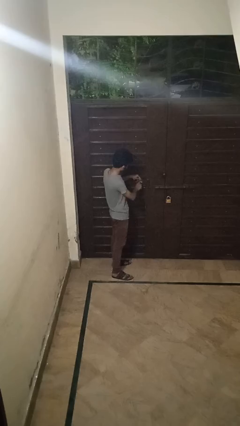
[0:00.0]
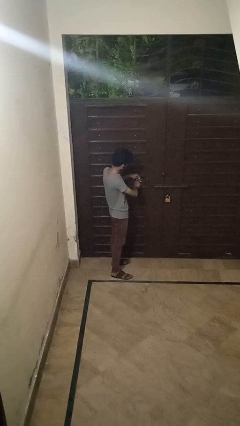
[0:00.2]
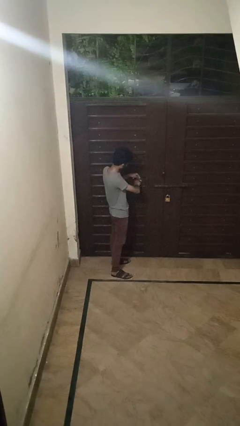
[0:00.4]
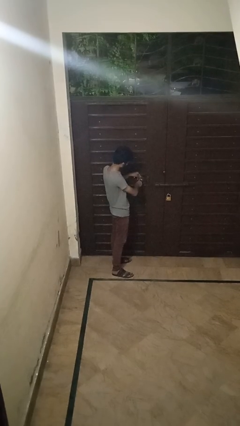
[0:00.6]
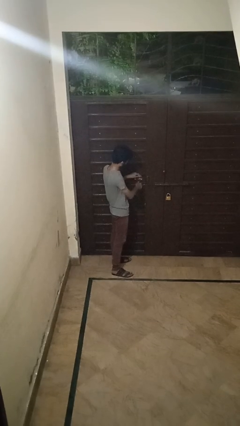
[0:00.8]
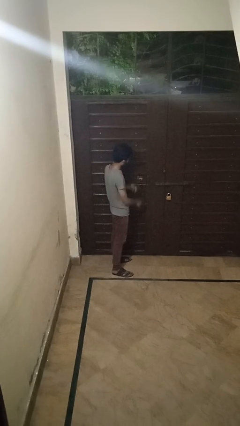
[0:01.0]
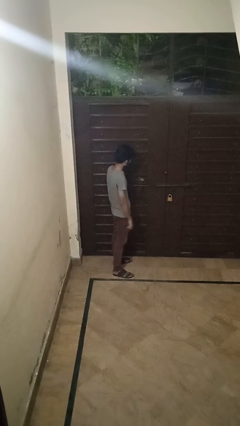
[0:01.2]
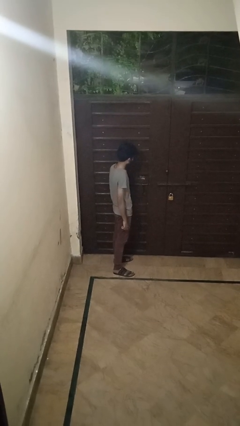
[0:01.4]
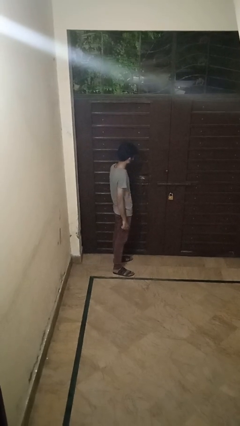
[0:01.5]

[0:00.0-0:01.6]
person locks door with keys

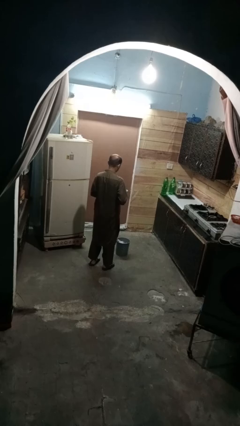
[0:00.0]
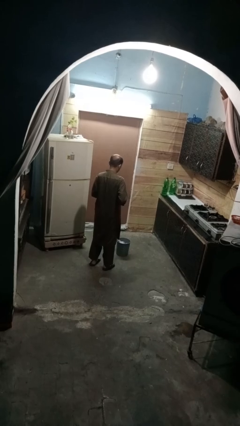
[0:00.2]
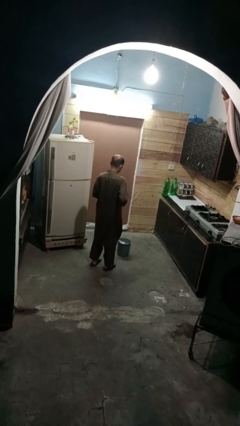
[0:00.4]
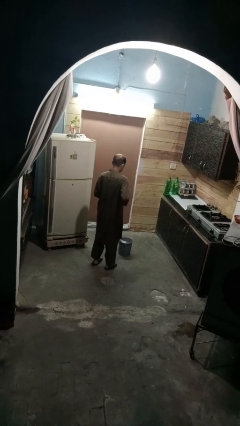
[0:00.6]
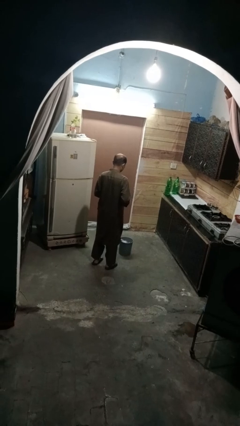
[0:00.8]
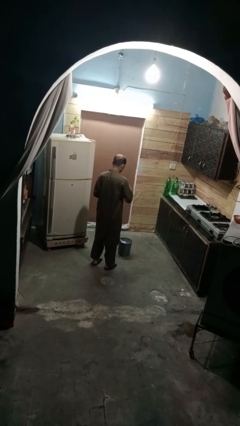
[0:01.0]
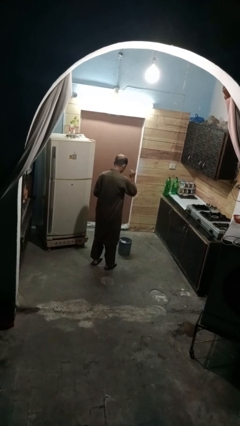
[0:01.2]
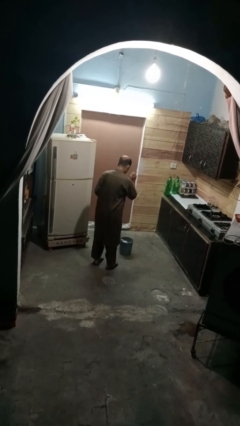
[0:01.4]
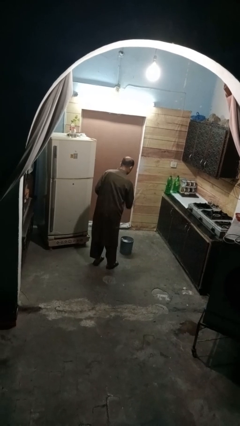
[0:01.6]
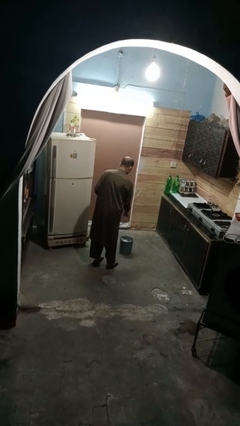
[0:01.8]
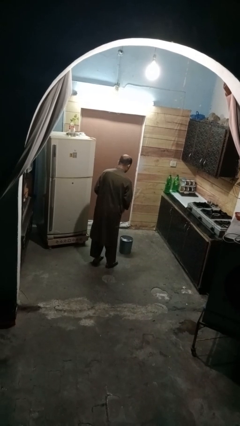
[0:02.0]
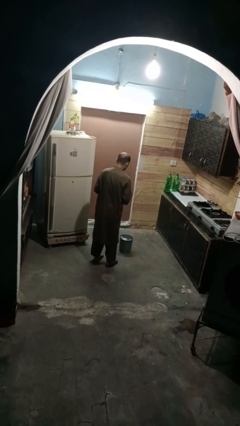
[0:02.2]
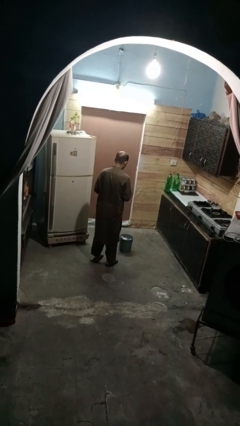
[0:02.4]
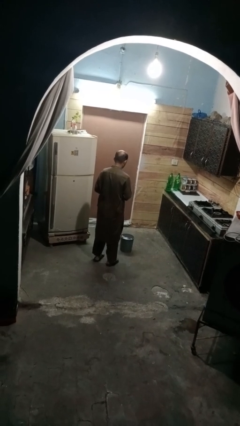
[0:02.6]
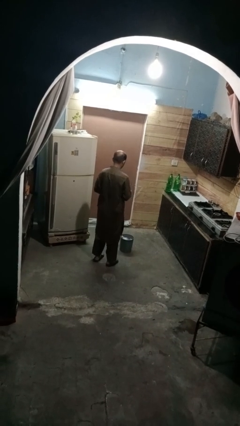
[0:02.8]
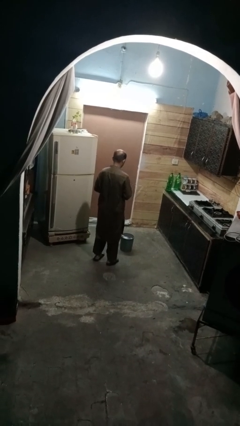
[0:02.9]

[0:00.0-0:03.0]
person discards trash

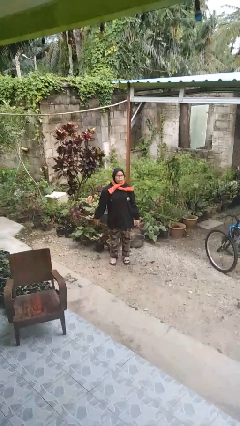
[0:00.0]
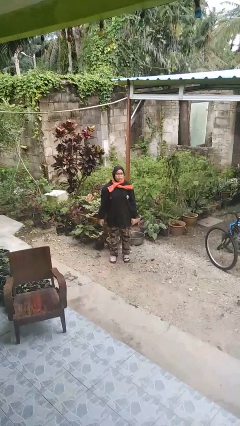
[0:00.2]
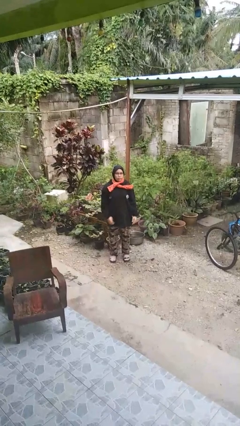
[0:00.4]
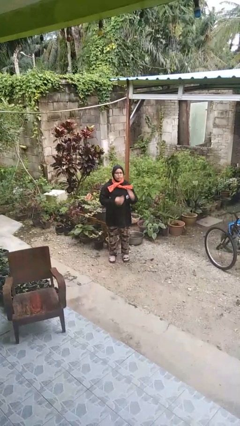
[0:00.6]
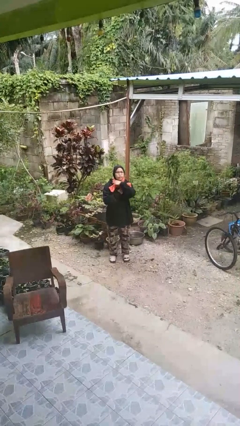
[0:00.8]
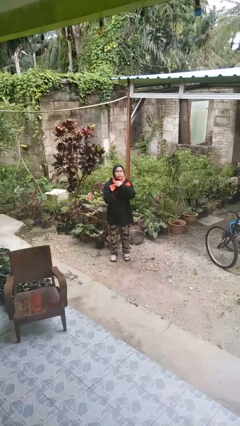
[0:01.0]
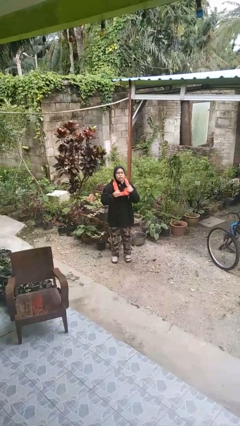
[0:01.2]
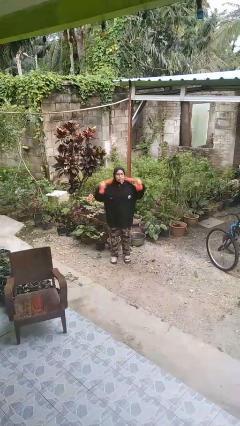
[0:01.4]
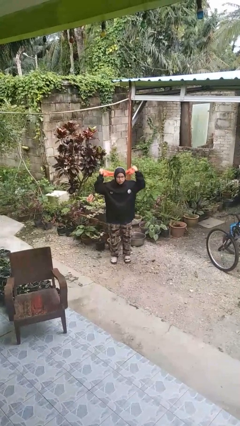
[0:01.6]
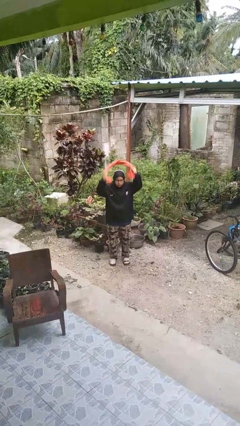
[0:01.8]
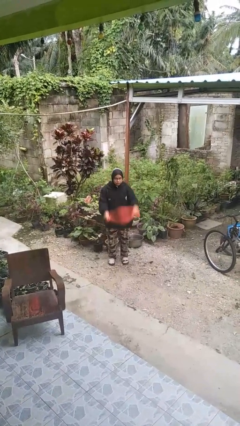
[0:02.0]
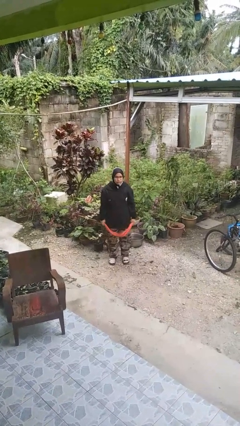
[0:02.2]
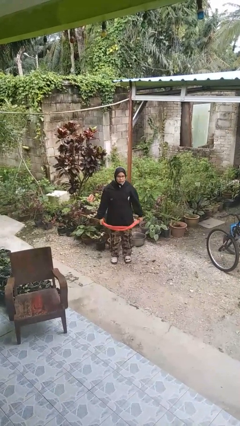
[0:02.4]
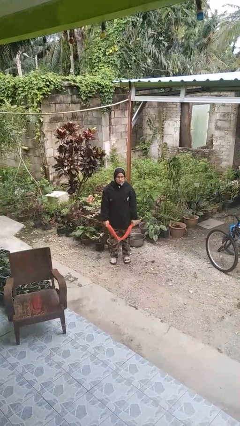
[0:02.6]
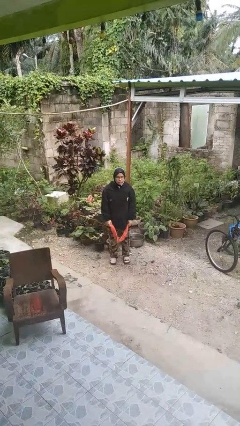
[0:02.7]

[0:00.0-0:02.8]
person takes off scarf

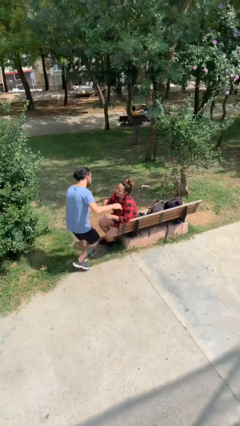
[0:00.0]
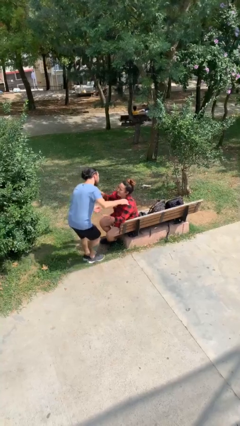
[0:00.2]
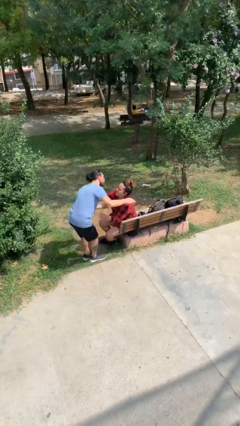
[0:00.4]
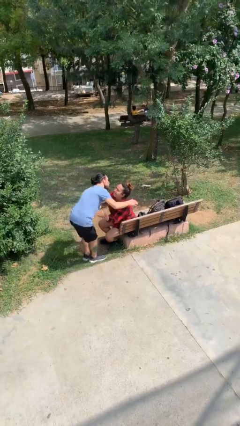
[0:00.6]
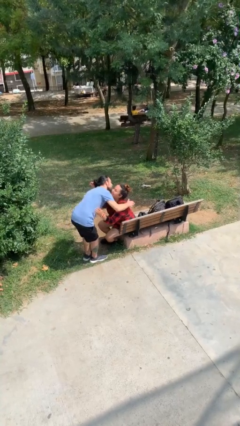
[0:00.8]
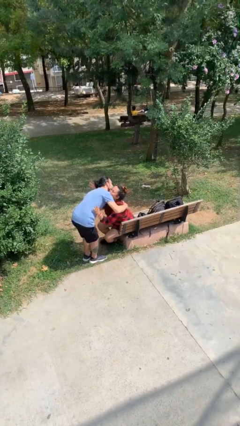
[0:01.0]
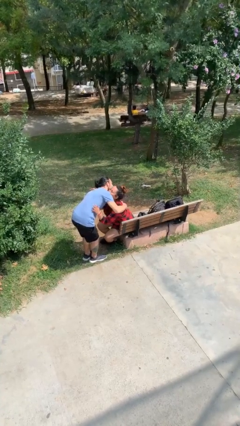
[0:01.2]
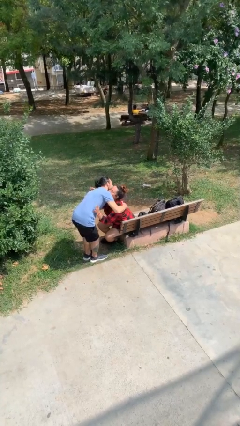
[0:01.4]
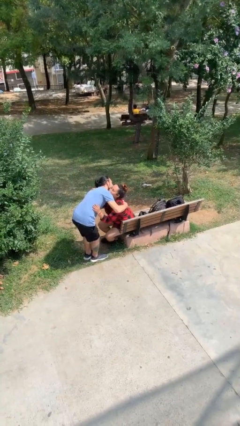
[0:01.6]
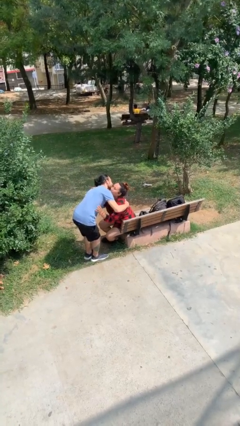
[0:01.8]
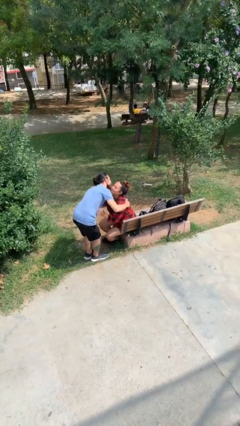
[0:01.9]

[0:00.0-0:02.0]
person embraces person

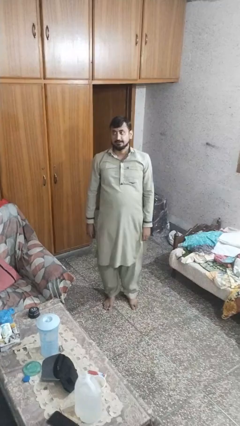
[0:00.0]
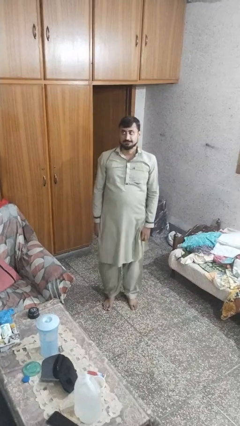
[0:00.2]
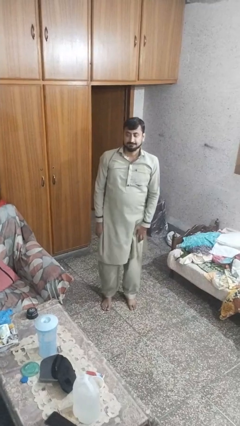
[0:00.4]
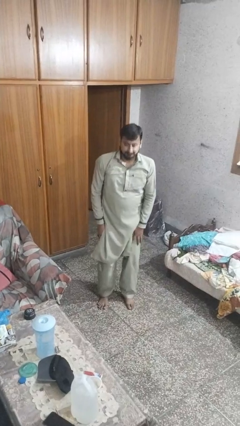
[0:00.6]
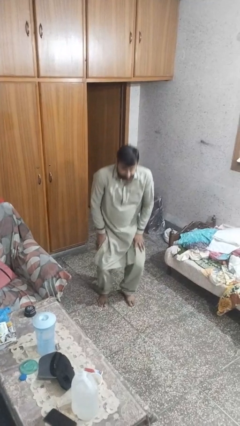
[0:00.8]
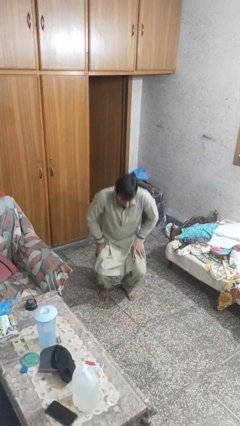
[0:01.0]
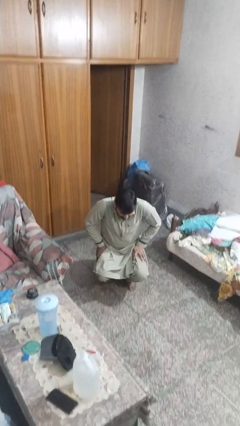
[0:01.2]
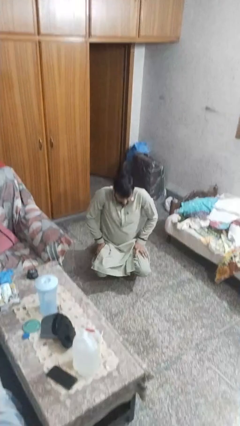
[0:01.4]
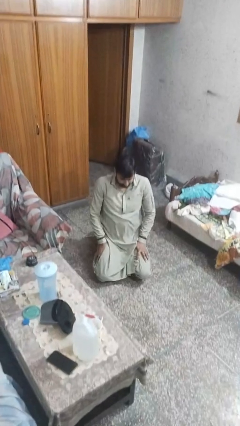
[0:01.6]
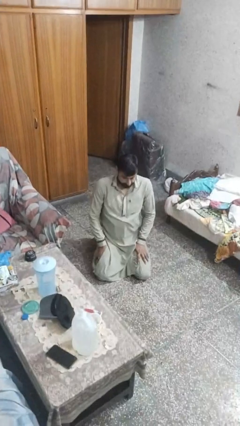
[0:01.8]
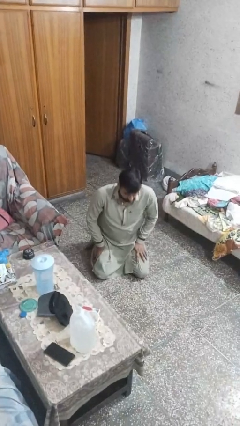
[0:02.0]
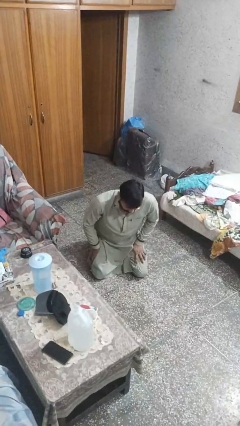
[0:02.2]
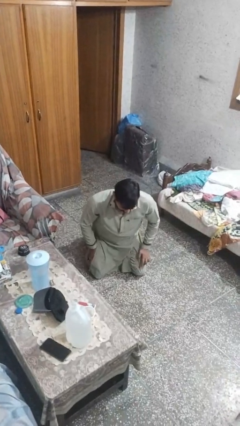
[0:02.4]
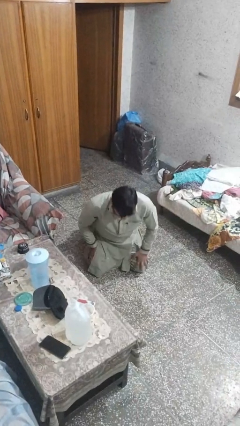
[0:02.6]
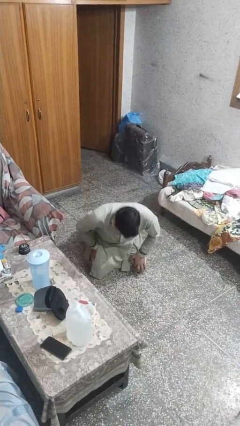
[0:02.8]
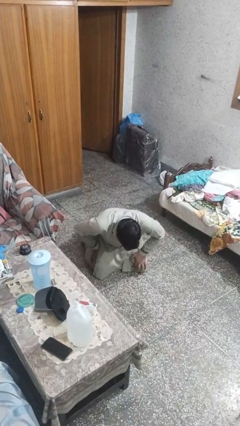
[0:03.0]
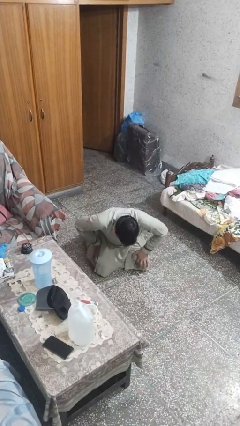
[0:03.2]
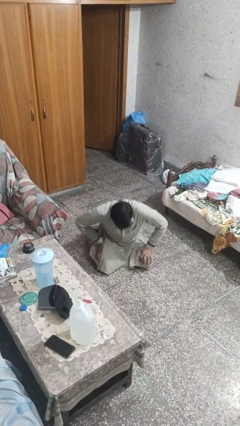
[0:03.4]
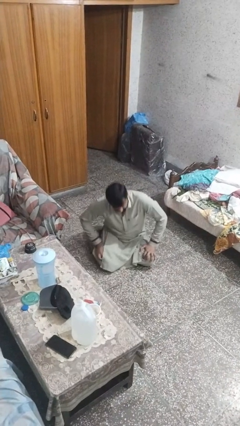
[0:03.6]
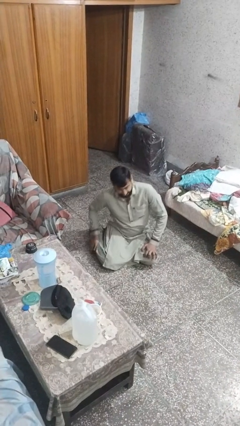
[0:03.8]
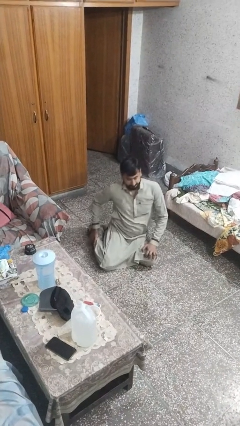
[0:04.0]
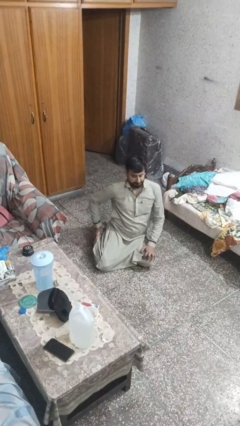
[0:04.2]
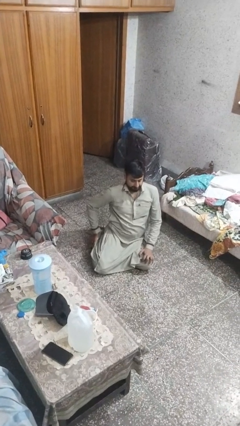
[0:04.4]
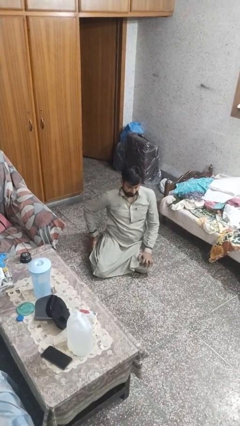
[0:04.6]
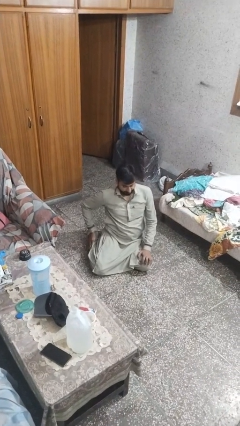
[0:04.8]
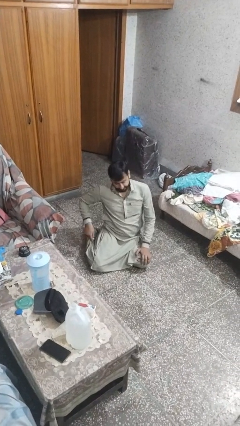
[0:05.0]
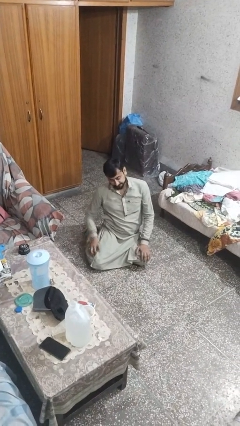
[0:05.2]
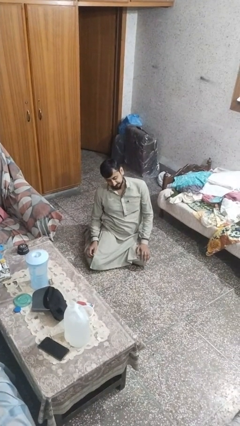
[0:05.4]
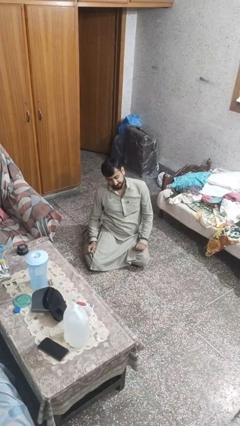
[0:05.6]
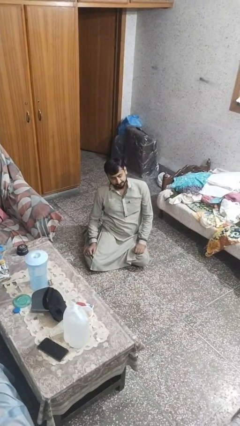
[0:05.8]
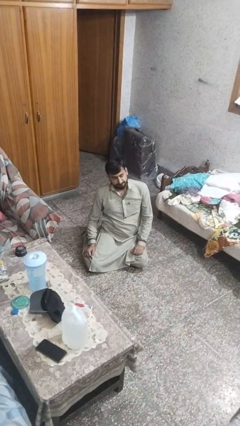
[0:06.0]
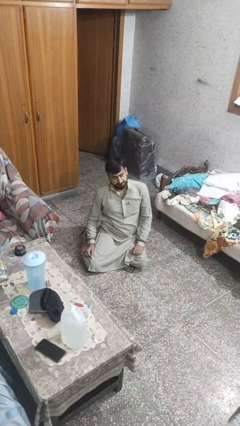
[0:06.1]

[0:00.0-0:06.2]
person sits crisscross

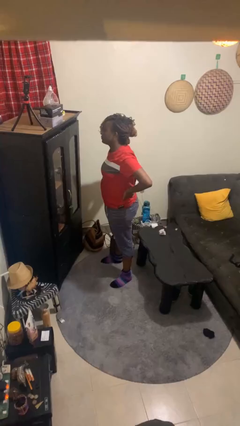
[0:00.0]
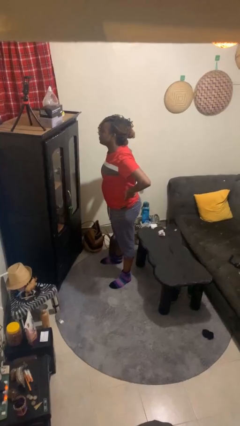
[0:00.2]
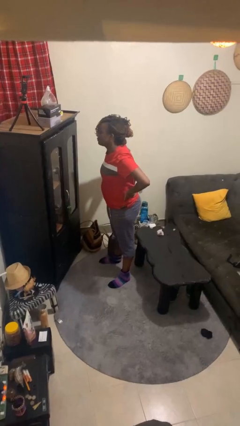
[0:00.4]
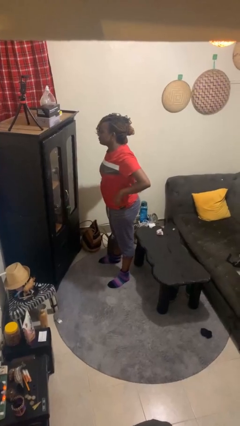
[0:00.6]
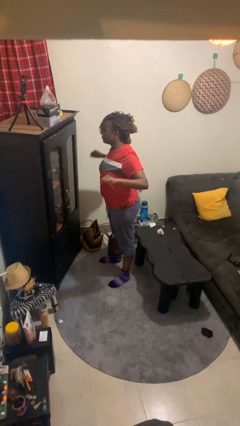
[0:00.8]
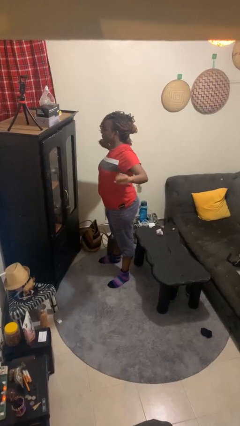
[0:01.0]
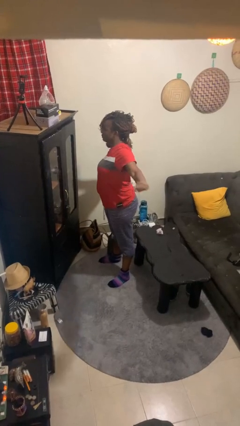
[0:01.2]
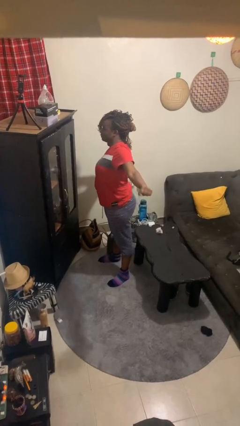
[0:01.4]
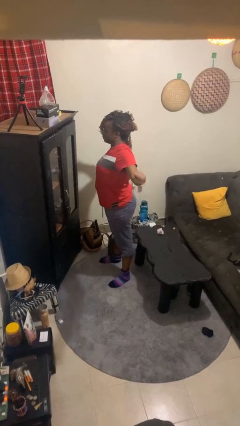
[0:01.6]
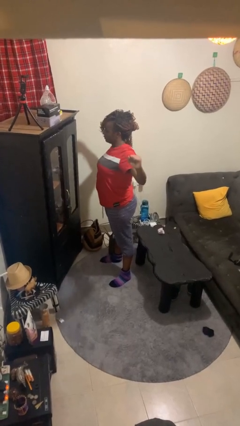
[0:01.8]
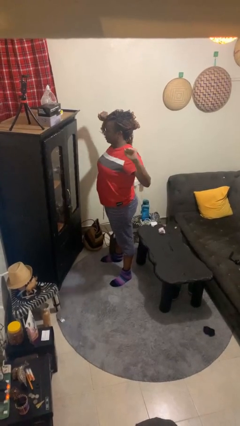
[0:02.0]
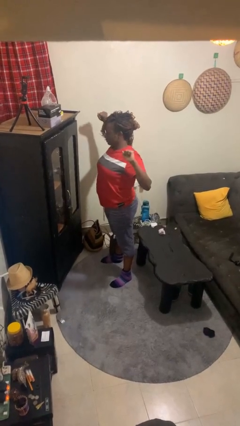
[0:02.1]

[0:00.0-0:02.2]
person stretches arms to side
